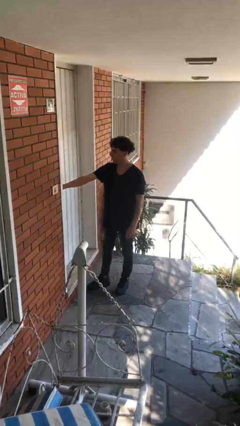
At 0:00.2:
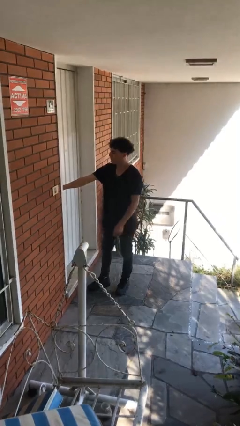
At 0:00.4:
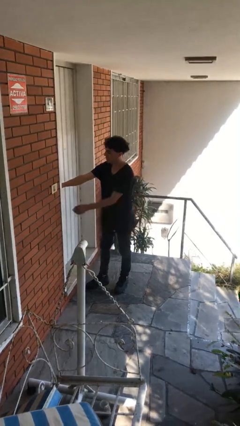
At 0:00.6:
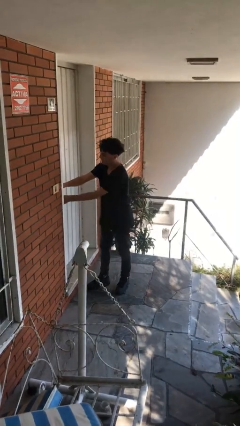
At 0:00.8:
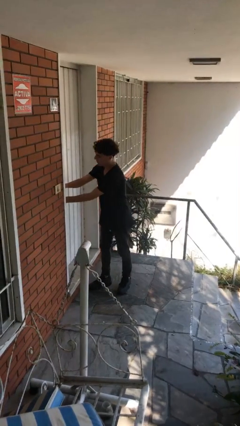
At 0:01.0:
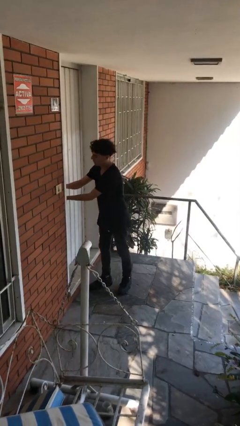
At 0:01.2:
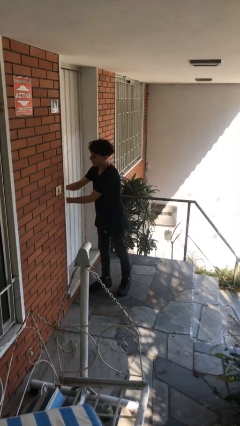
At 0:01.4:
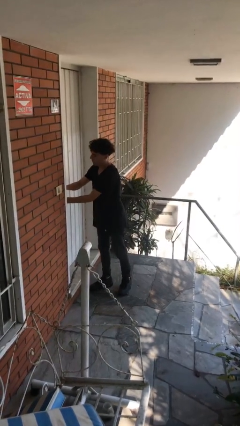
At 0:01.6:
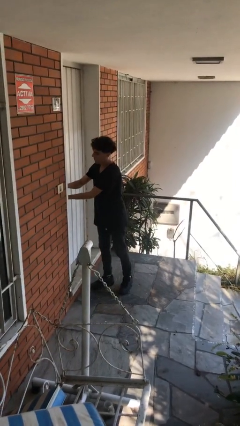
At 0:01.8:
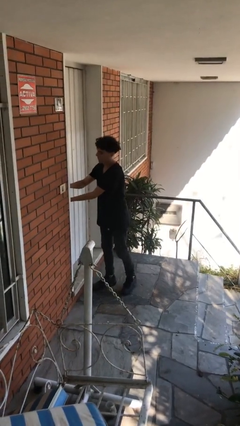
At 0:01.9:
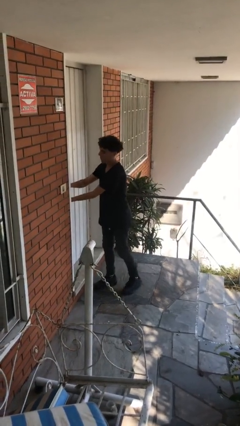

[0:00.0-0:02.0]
person locks door with keys

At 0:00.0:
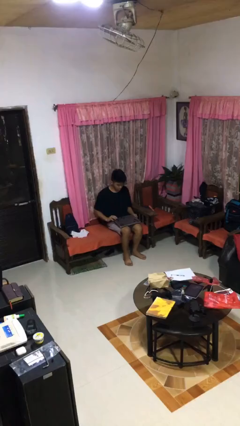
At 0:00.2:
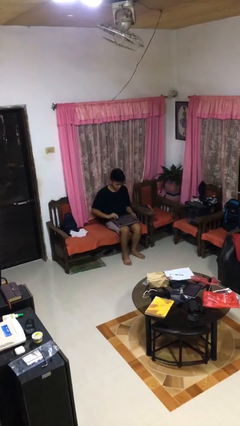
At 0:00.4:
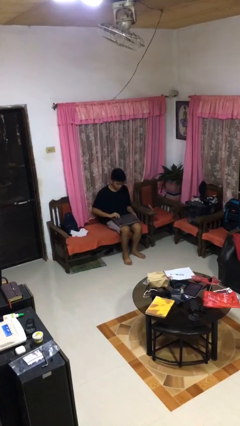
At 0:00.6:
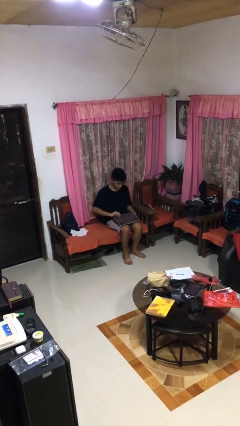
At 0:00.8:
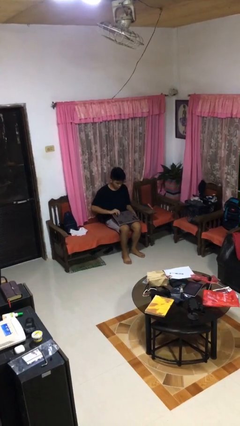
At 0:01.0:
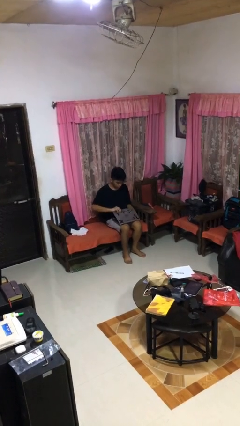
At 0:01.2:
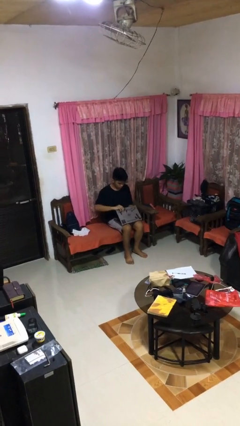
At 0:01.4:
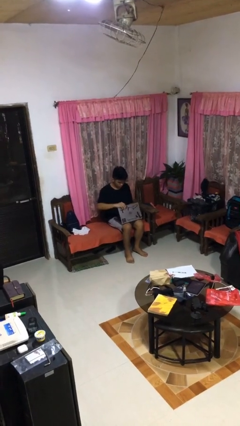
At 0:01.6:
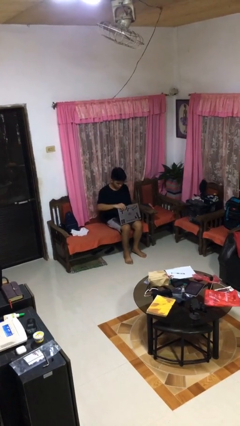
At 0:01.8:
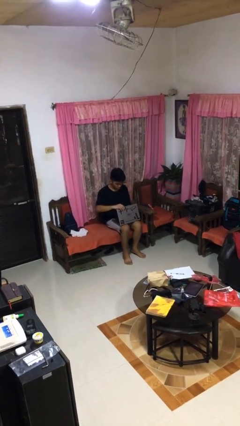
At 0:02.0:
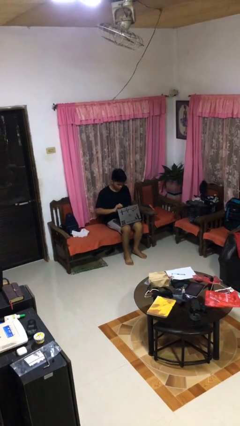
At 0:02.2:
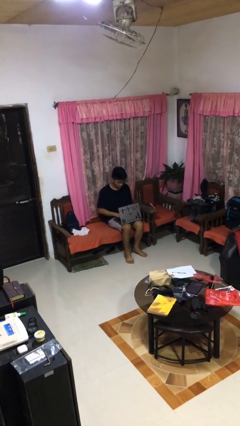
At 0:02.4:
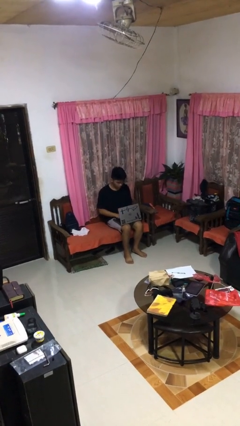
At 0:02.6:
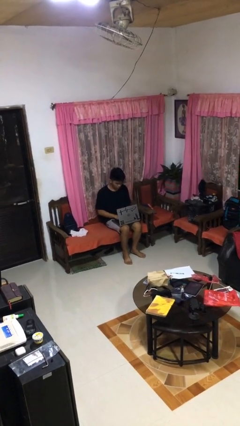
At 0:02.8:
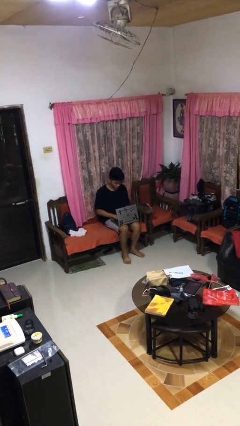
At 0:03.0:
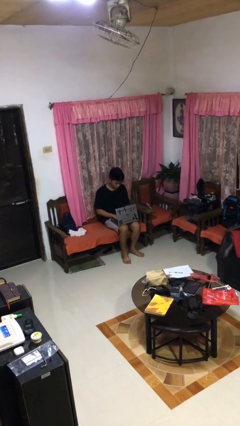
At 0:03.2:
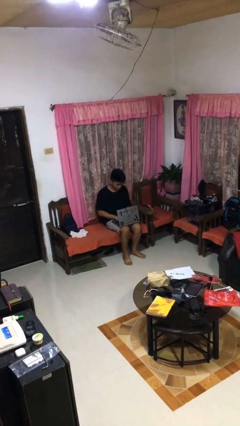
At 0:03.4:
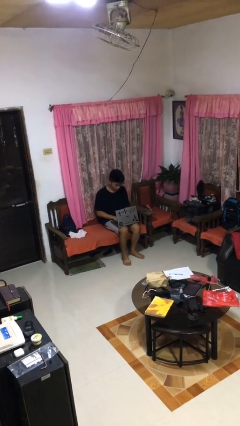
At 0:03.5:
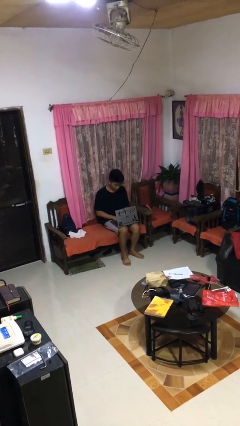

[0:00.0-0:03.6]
person opens laptop

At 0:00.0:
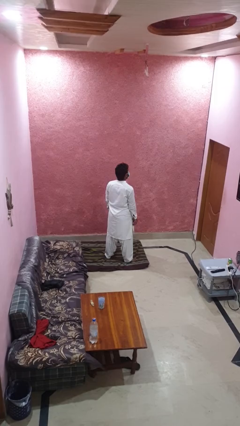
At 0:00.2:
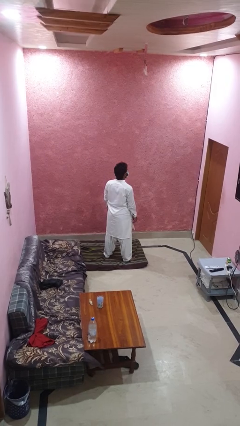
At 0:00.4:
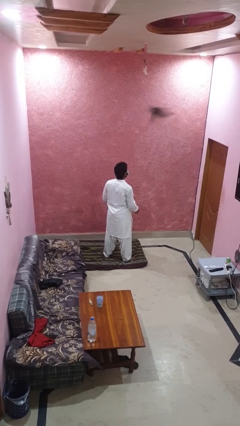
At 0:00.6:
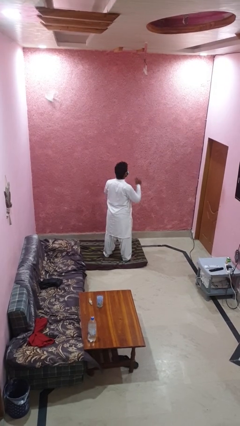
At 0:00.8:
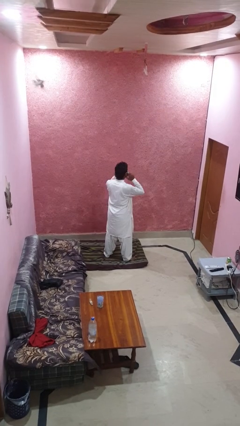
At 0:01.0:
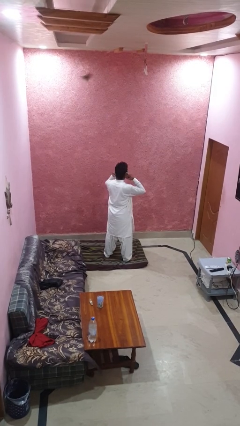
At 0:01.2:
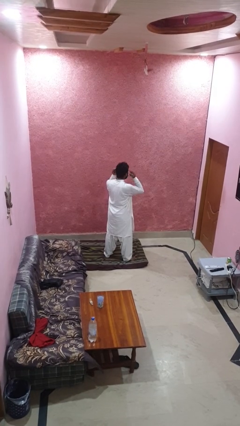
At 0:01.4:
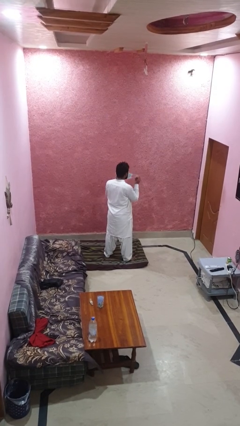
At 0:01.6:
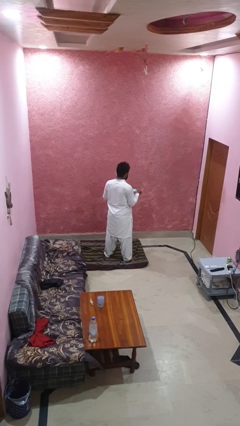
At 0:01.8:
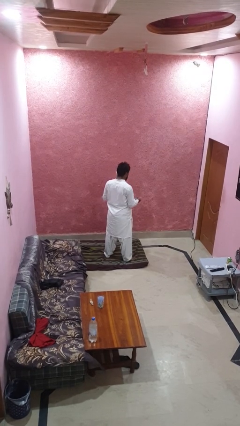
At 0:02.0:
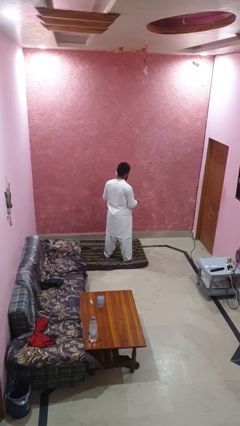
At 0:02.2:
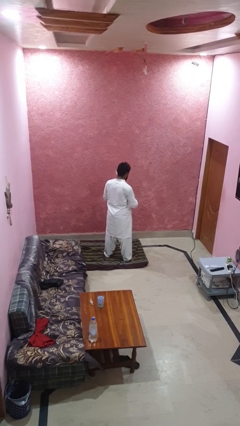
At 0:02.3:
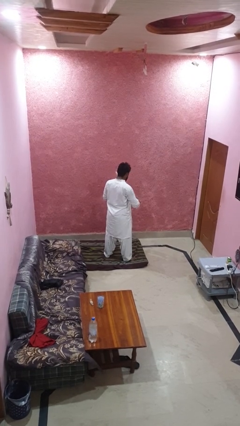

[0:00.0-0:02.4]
person takes off facemask

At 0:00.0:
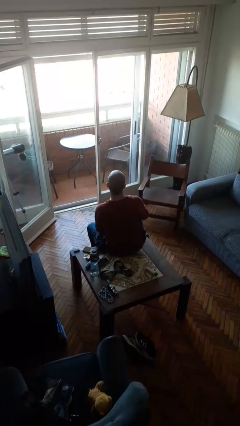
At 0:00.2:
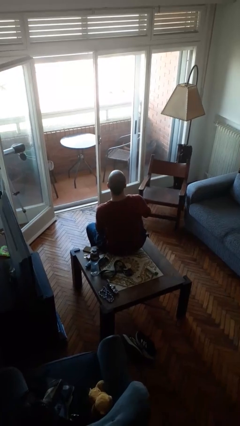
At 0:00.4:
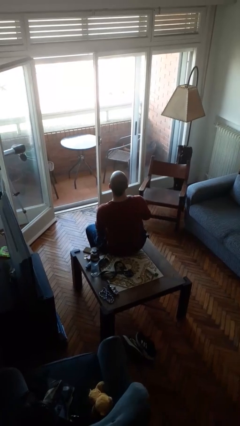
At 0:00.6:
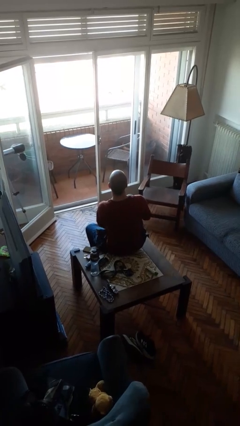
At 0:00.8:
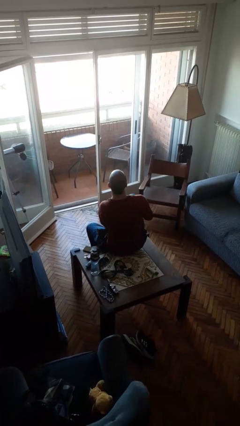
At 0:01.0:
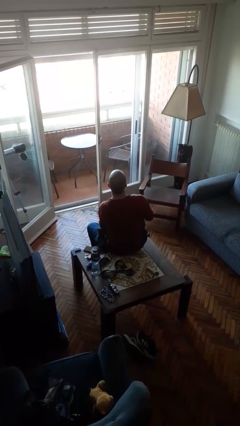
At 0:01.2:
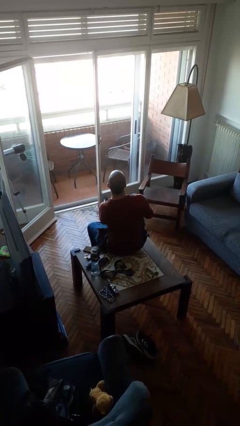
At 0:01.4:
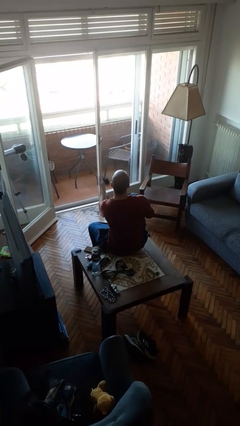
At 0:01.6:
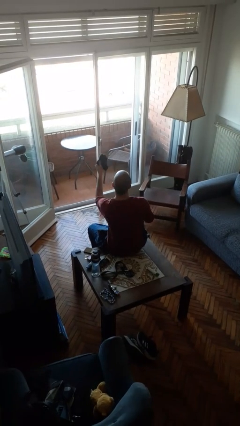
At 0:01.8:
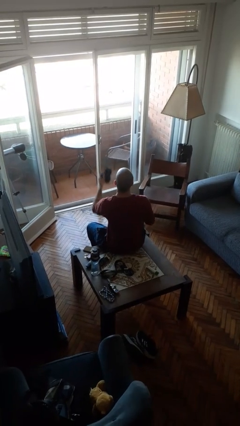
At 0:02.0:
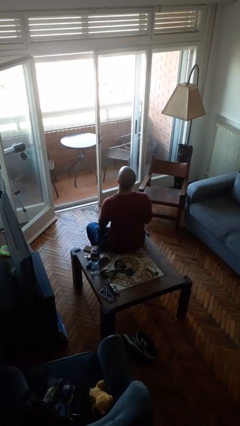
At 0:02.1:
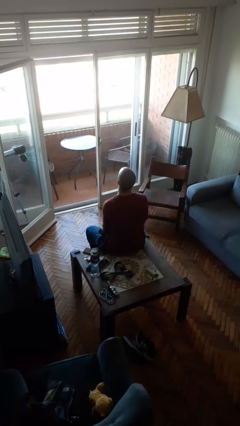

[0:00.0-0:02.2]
person takes off socks

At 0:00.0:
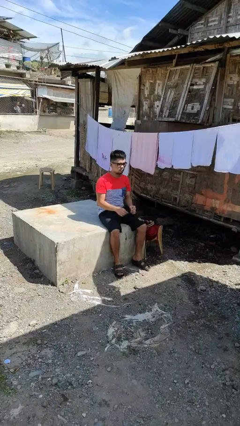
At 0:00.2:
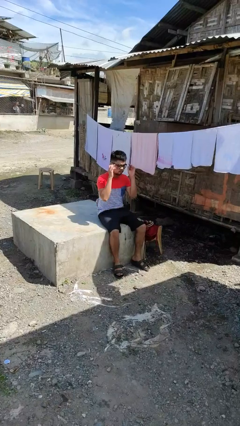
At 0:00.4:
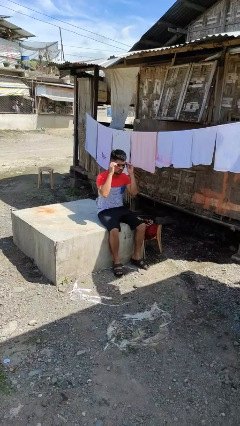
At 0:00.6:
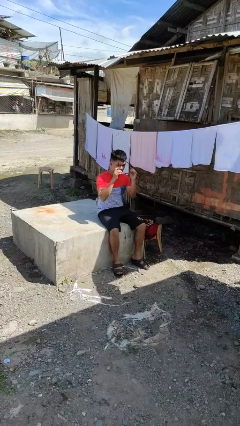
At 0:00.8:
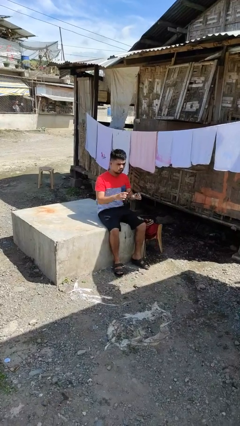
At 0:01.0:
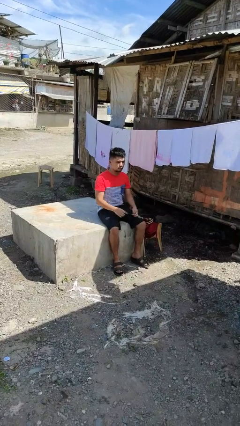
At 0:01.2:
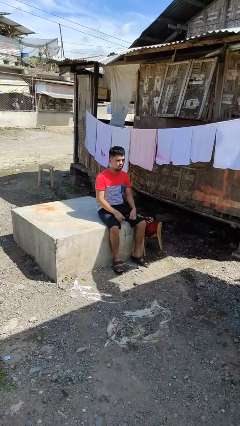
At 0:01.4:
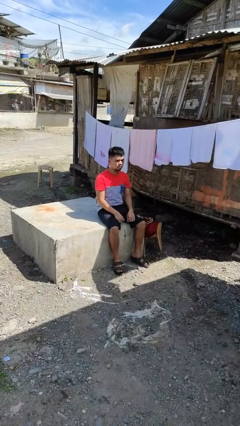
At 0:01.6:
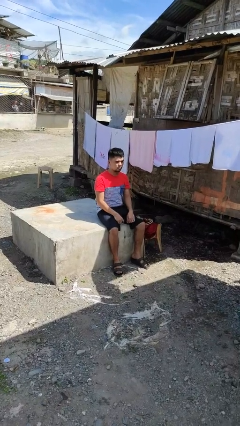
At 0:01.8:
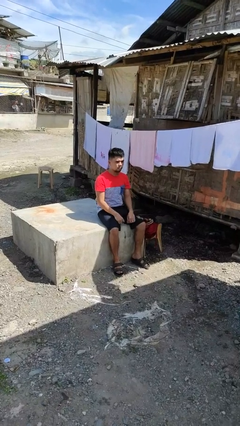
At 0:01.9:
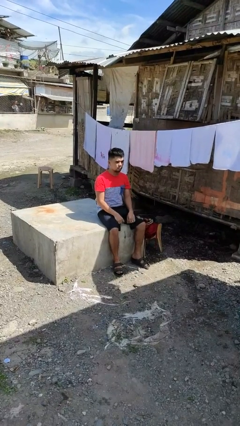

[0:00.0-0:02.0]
person takes off glasses

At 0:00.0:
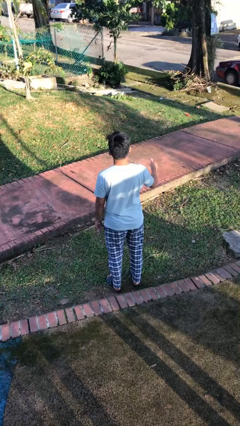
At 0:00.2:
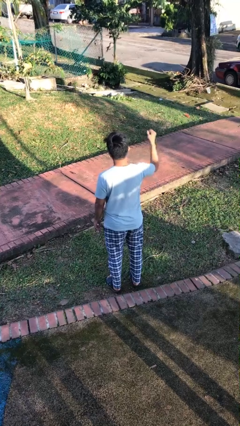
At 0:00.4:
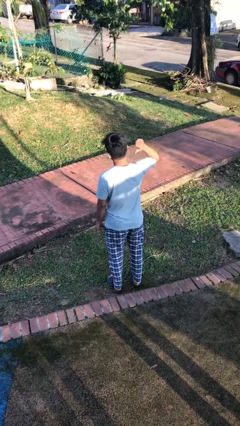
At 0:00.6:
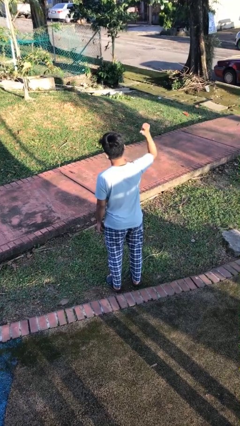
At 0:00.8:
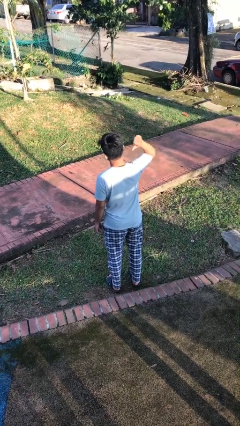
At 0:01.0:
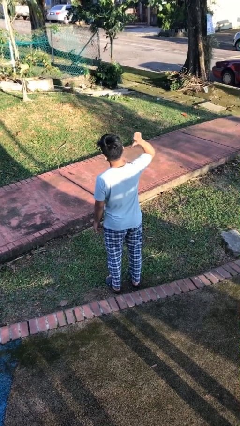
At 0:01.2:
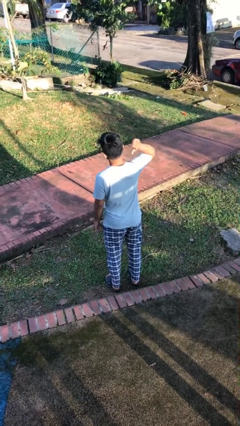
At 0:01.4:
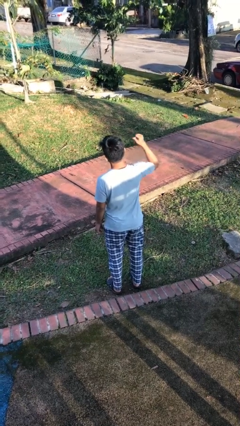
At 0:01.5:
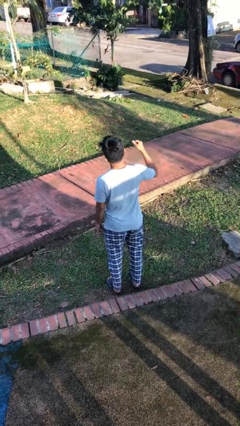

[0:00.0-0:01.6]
person gestures behind me

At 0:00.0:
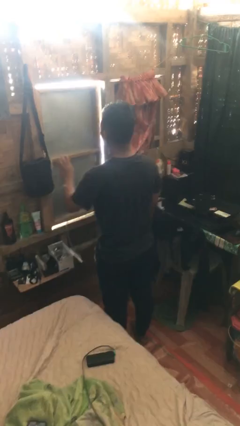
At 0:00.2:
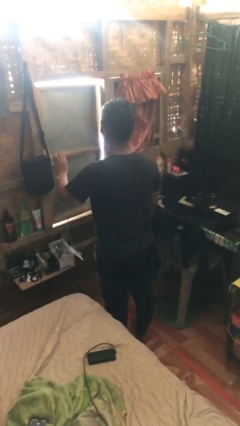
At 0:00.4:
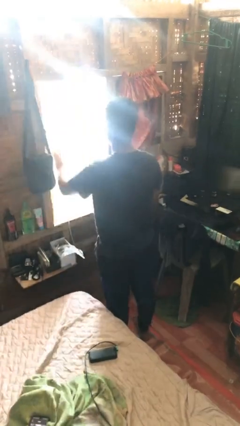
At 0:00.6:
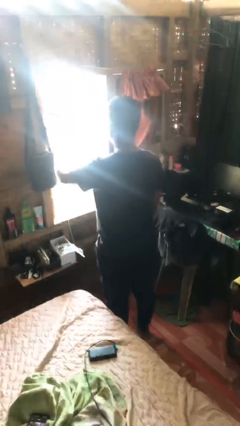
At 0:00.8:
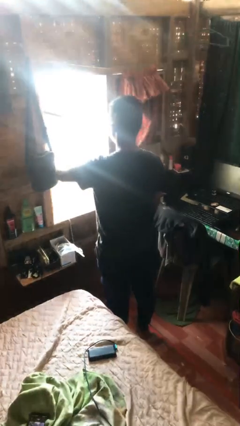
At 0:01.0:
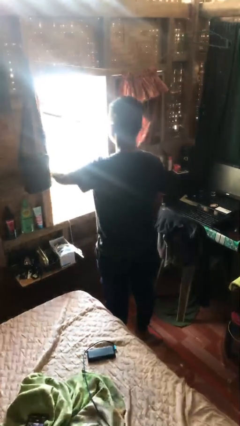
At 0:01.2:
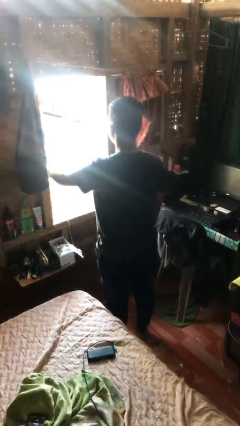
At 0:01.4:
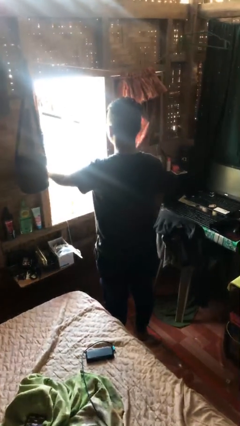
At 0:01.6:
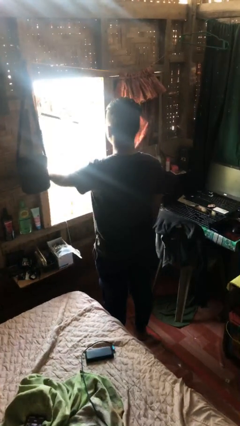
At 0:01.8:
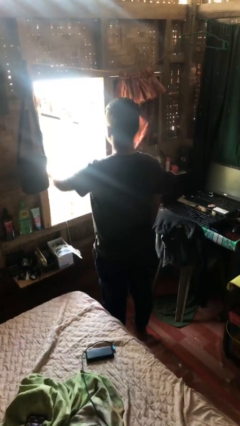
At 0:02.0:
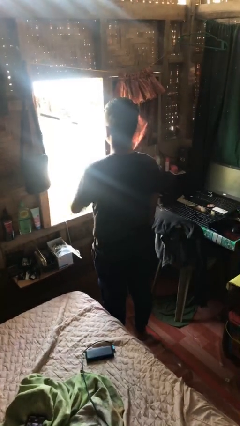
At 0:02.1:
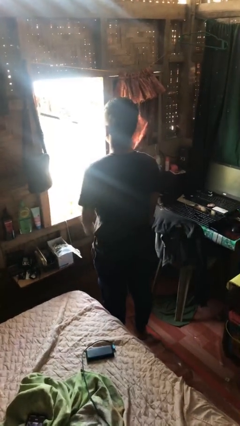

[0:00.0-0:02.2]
person opens home window

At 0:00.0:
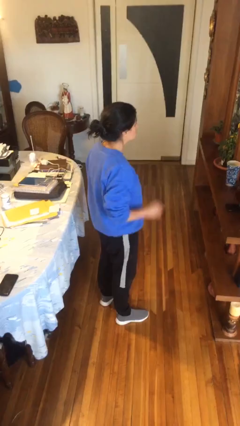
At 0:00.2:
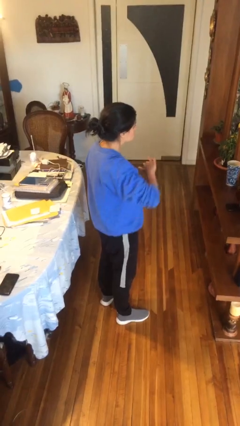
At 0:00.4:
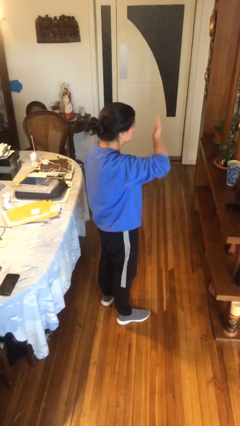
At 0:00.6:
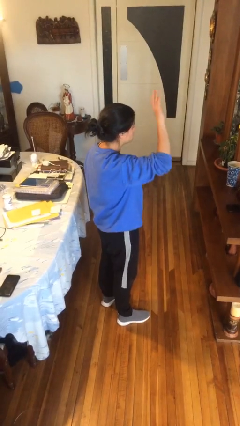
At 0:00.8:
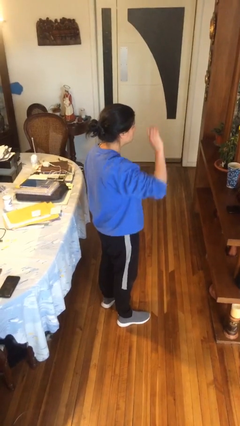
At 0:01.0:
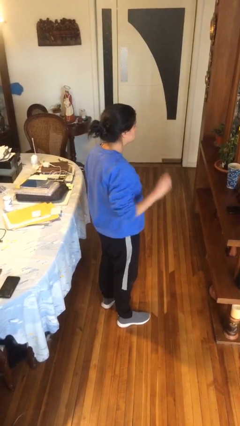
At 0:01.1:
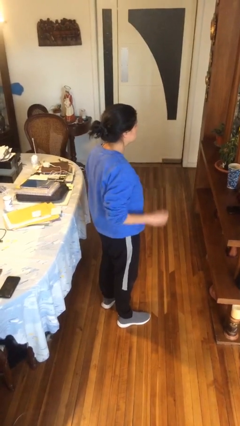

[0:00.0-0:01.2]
person gestures swipe up
